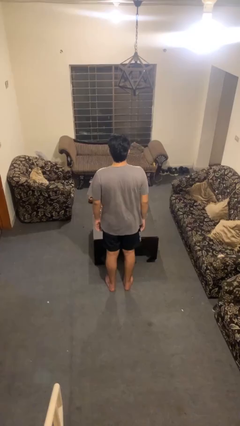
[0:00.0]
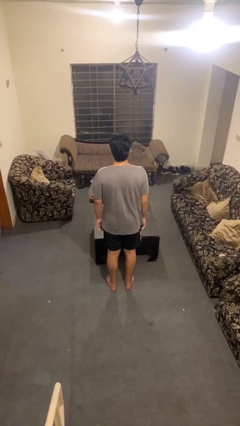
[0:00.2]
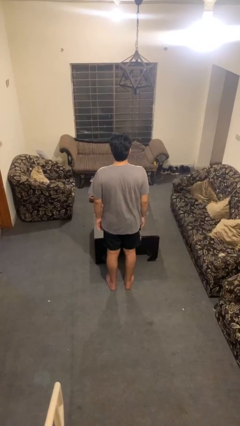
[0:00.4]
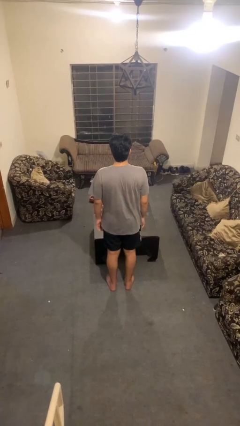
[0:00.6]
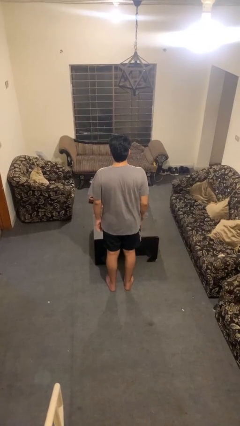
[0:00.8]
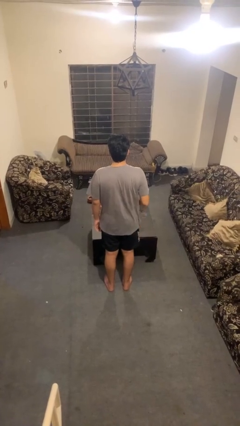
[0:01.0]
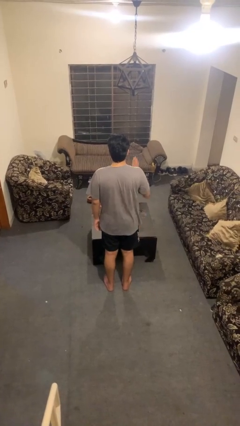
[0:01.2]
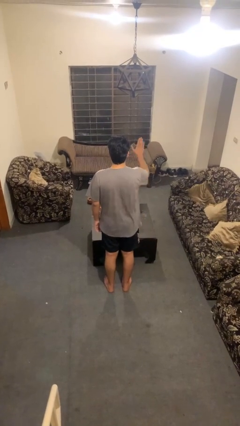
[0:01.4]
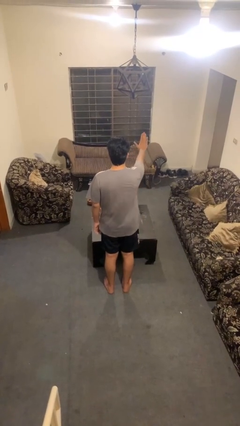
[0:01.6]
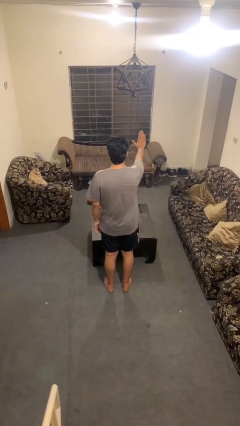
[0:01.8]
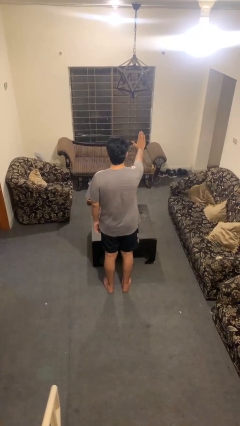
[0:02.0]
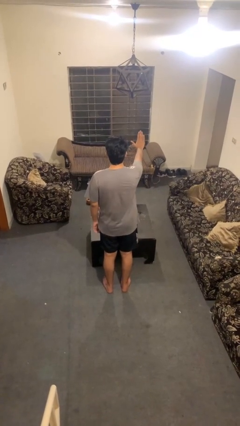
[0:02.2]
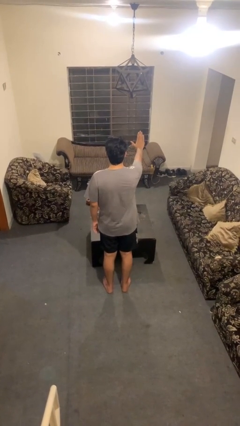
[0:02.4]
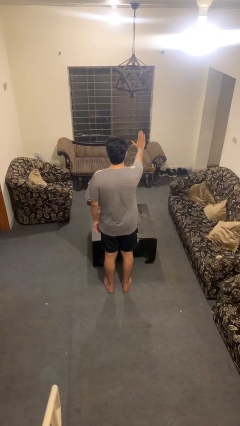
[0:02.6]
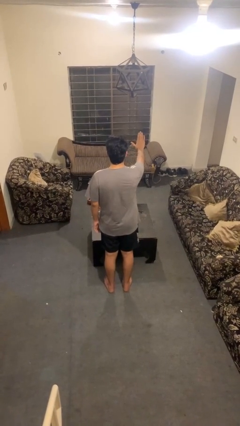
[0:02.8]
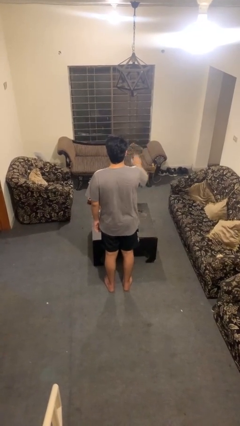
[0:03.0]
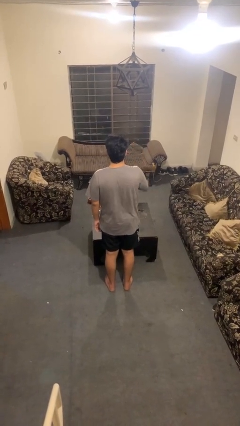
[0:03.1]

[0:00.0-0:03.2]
person gestures stop

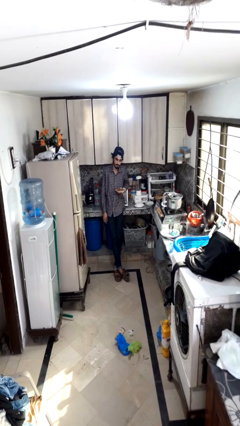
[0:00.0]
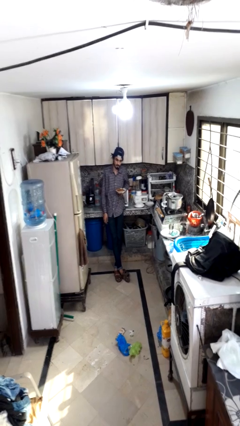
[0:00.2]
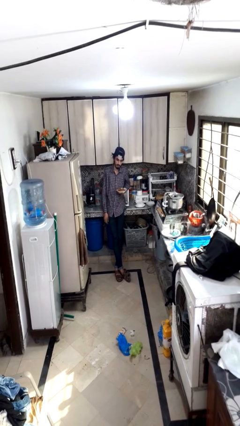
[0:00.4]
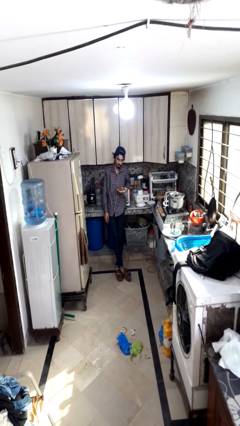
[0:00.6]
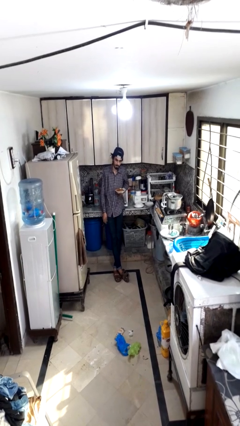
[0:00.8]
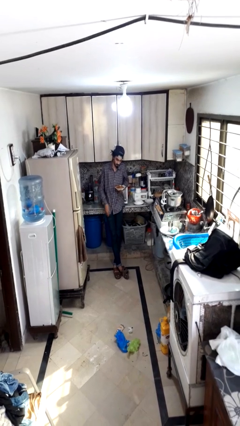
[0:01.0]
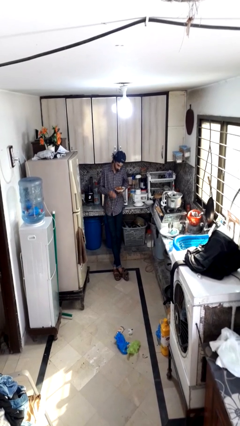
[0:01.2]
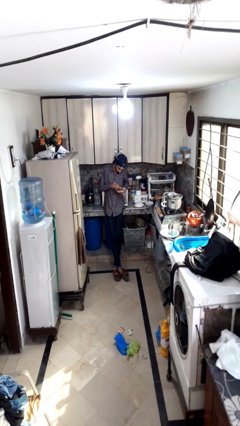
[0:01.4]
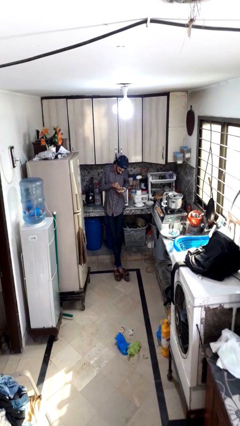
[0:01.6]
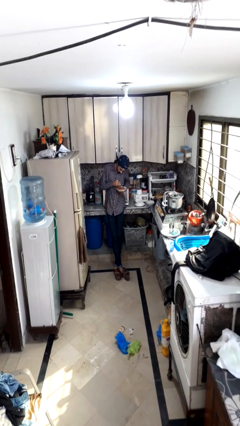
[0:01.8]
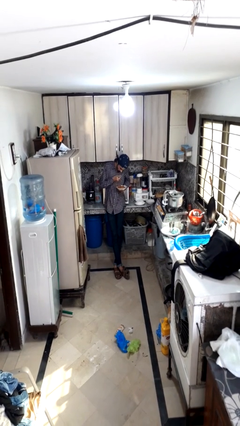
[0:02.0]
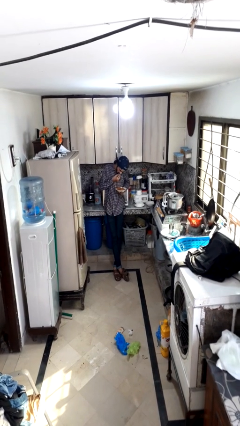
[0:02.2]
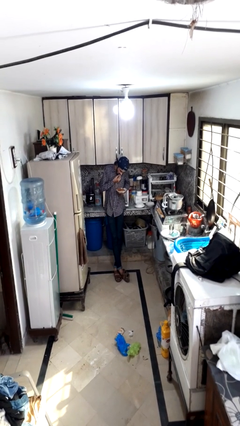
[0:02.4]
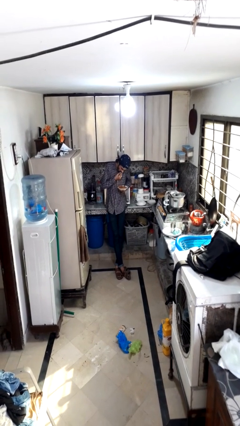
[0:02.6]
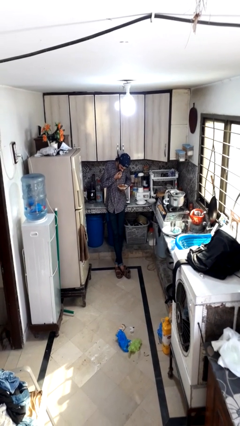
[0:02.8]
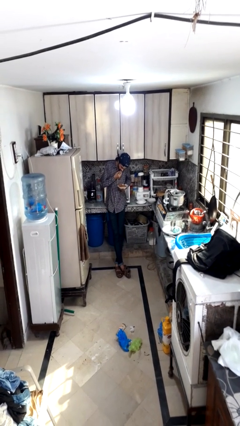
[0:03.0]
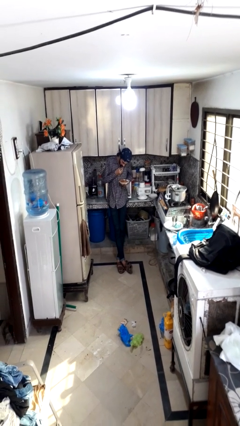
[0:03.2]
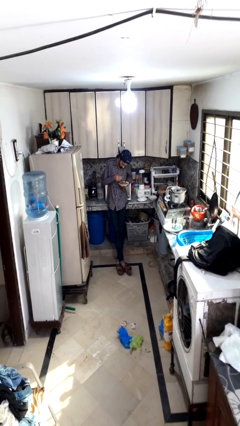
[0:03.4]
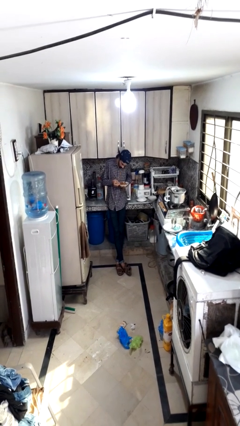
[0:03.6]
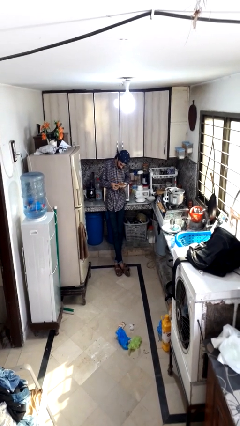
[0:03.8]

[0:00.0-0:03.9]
person eats with hands

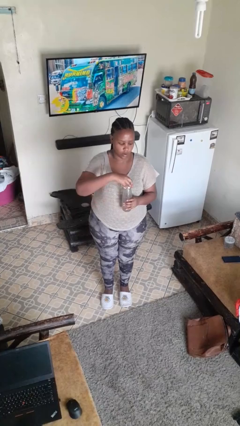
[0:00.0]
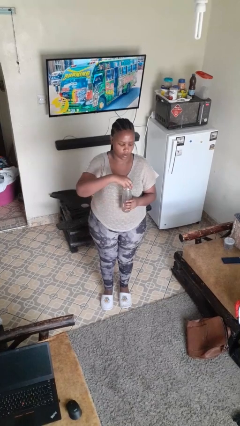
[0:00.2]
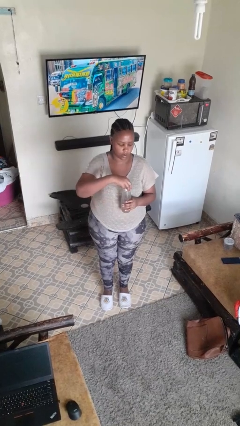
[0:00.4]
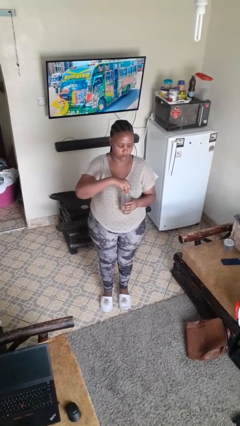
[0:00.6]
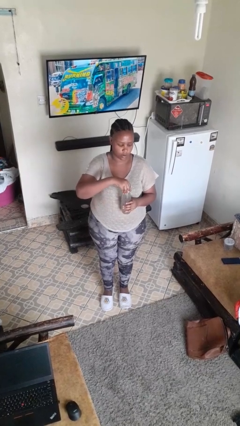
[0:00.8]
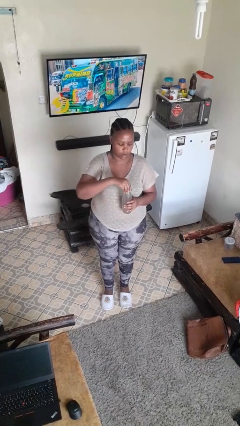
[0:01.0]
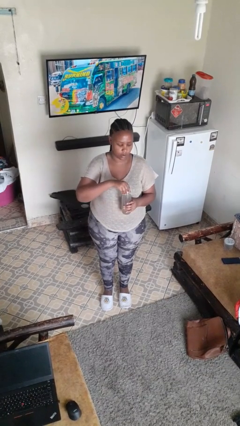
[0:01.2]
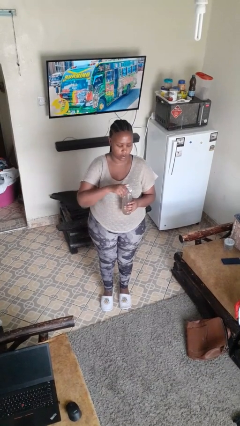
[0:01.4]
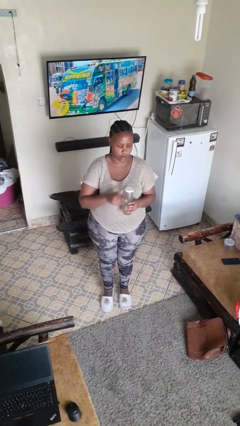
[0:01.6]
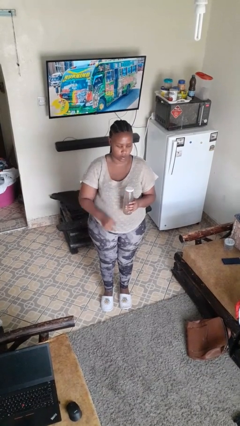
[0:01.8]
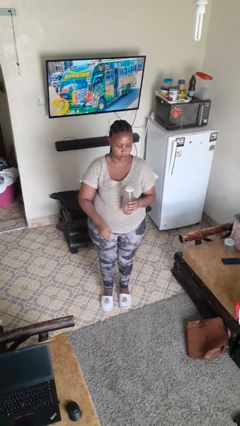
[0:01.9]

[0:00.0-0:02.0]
person screws lid to bottle

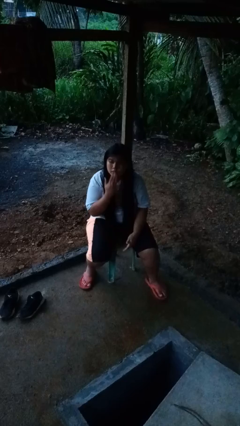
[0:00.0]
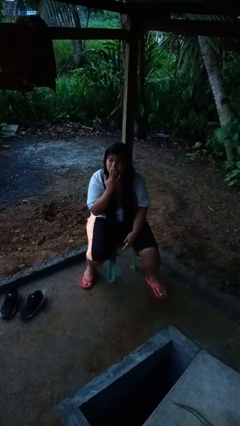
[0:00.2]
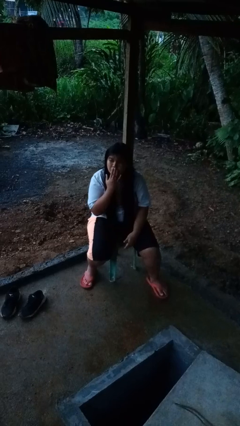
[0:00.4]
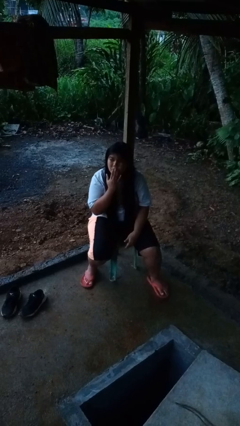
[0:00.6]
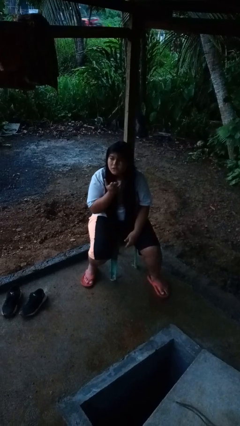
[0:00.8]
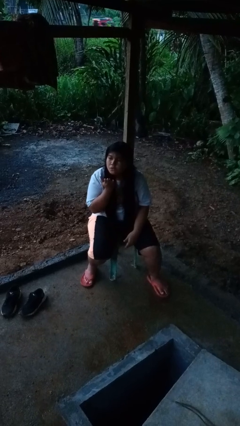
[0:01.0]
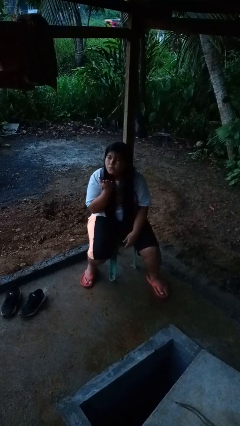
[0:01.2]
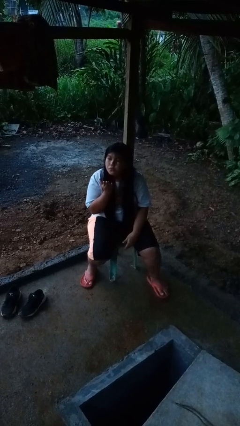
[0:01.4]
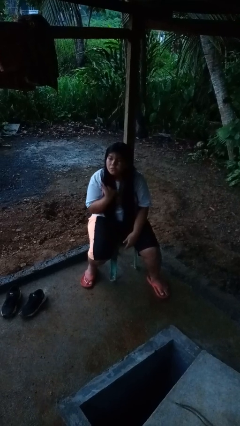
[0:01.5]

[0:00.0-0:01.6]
person gestures blow kiss

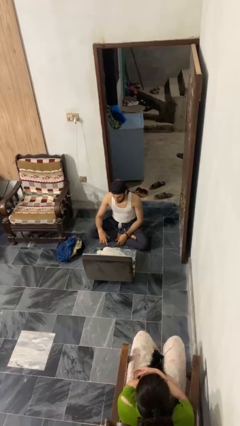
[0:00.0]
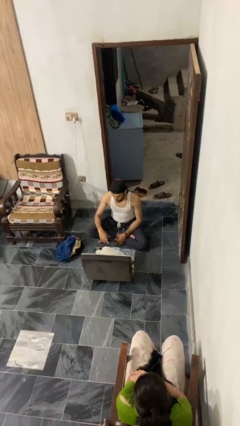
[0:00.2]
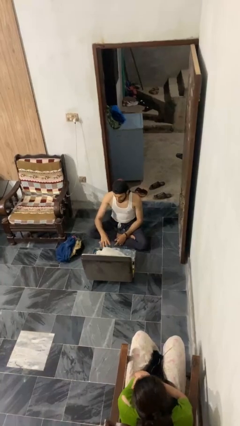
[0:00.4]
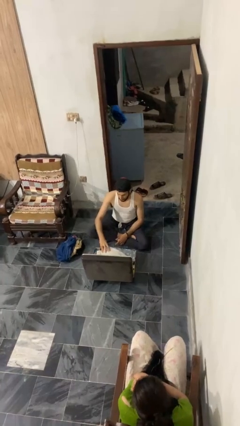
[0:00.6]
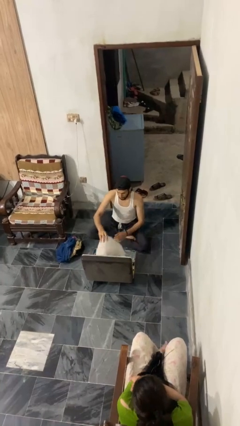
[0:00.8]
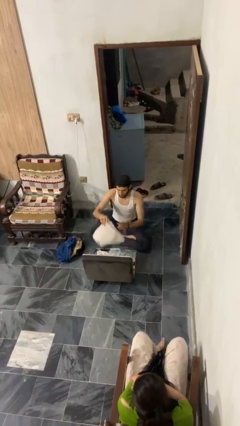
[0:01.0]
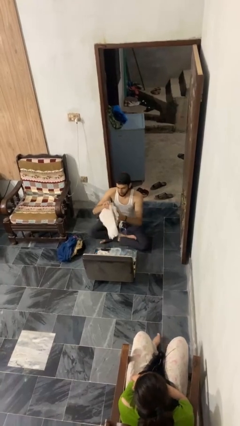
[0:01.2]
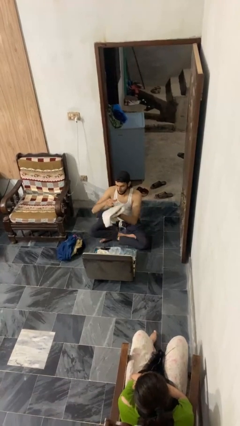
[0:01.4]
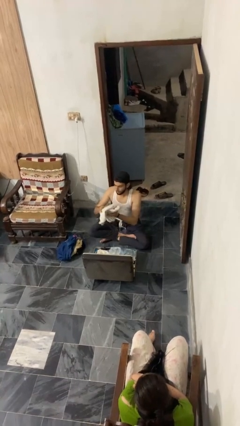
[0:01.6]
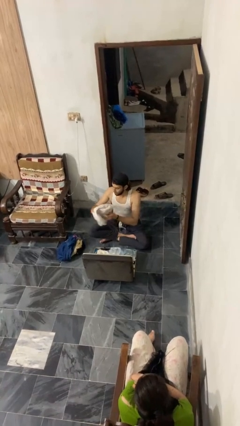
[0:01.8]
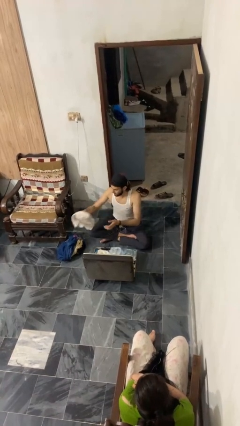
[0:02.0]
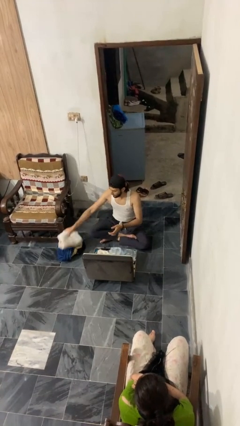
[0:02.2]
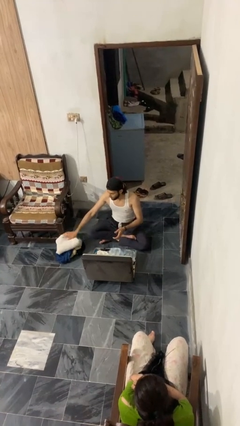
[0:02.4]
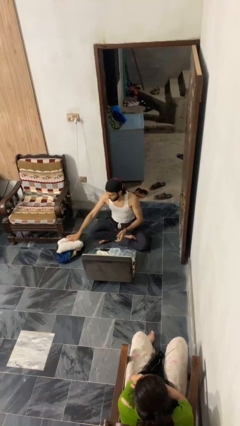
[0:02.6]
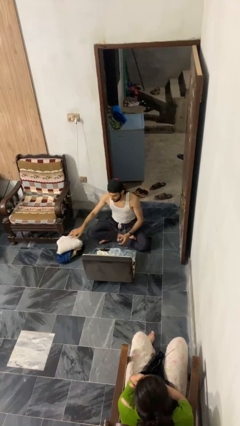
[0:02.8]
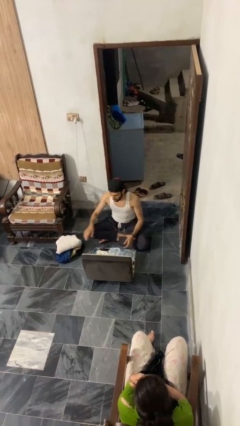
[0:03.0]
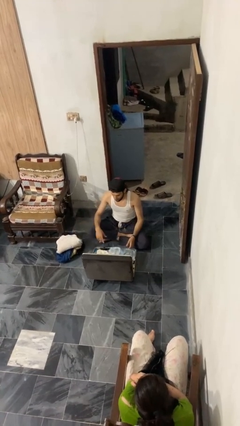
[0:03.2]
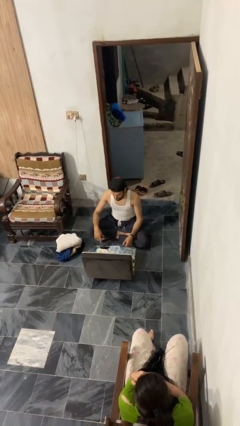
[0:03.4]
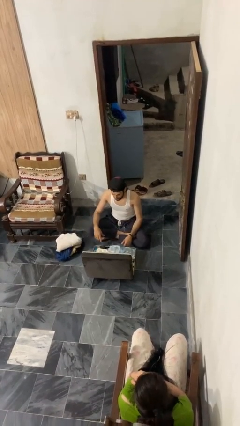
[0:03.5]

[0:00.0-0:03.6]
person unloads clothes from suitcase

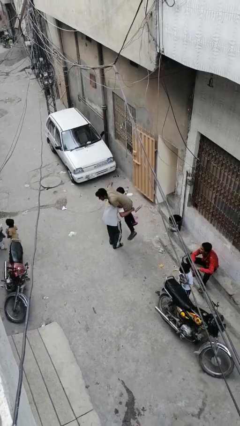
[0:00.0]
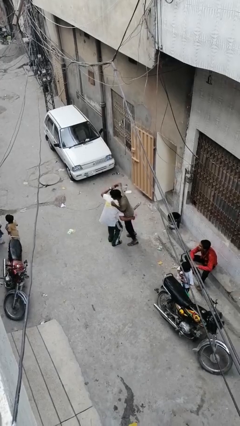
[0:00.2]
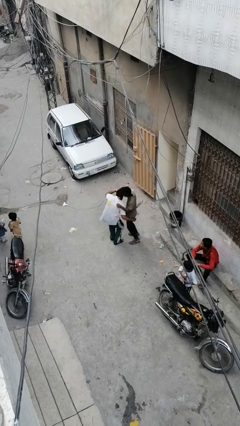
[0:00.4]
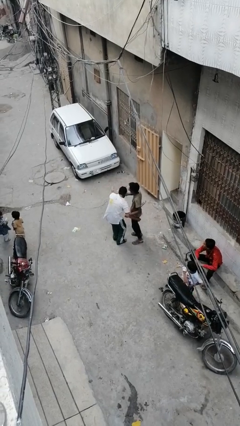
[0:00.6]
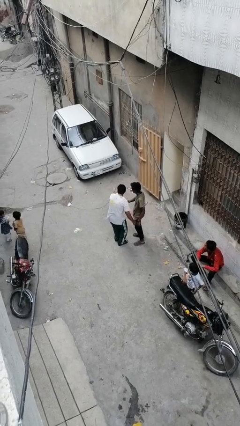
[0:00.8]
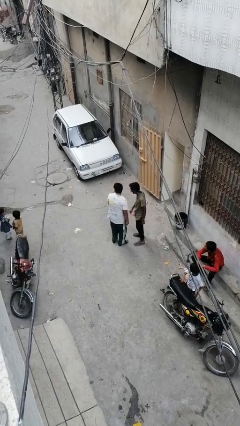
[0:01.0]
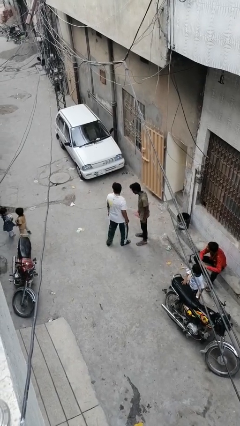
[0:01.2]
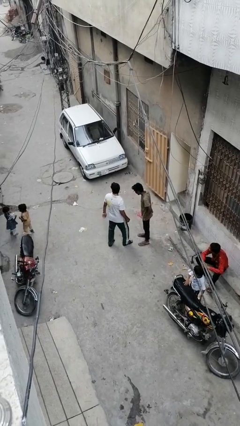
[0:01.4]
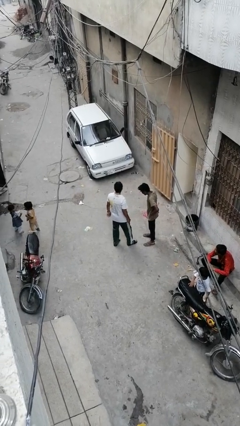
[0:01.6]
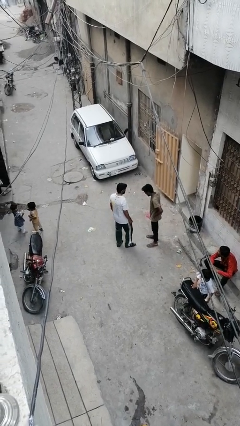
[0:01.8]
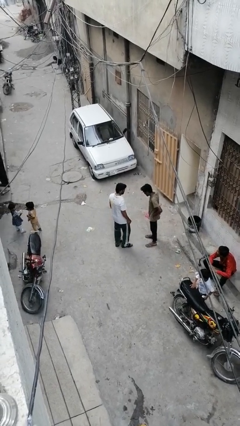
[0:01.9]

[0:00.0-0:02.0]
person puts down person

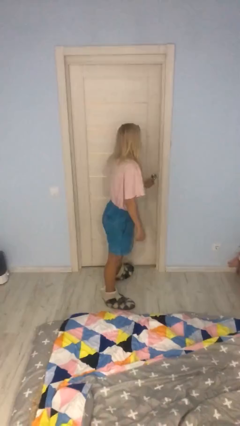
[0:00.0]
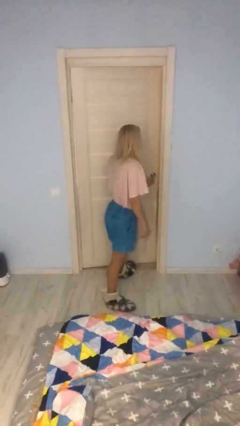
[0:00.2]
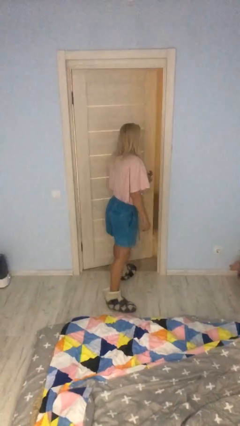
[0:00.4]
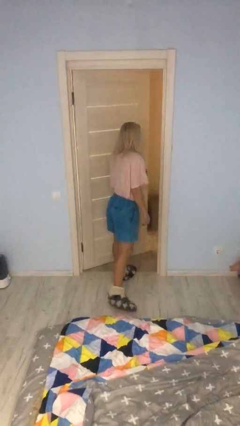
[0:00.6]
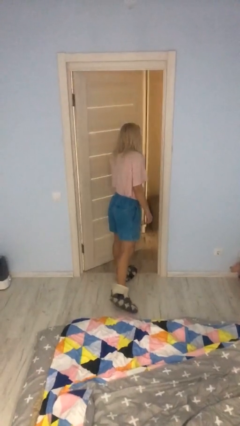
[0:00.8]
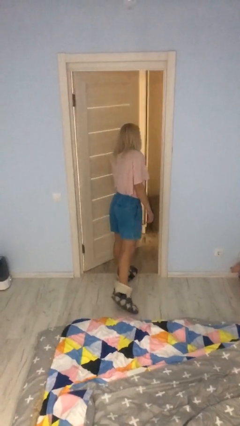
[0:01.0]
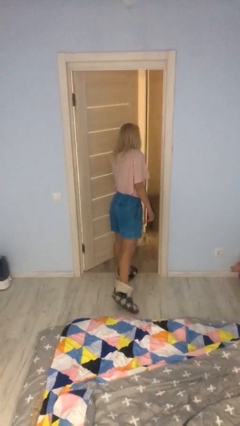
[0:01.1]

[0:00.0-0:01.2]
person opens facility door
